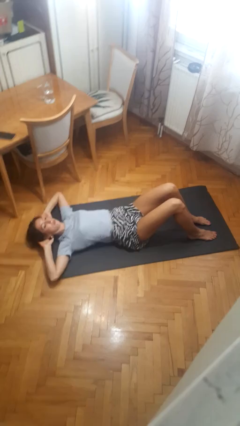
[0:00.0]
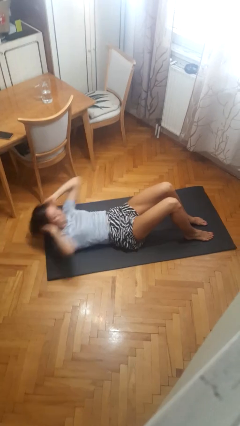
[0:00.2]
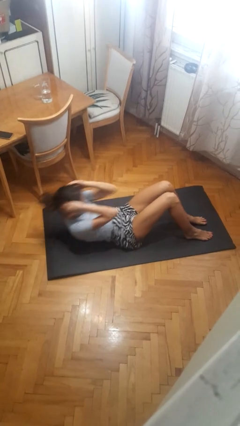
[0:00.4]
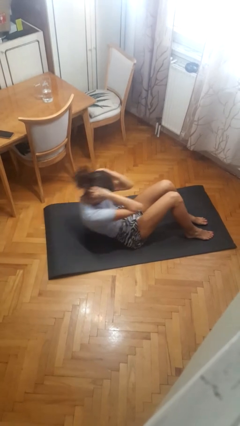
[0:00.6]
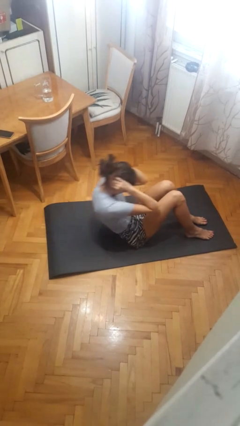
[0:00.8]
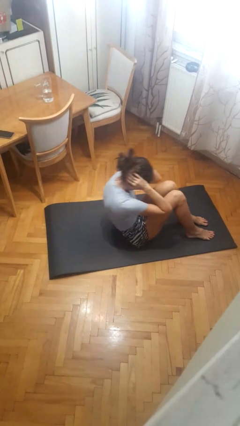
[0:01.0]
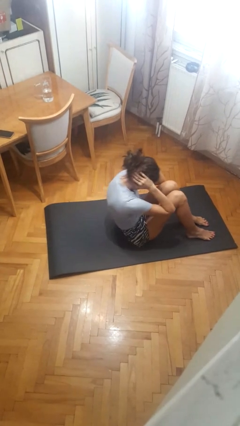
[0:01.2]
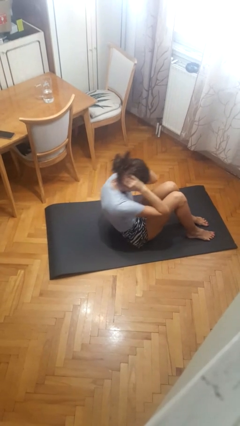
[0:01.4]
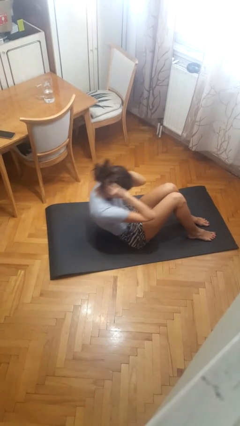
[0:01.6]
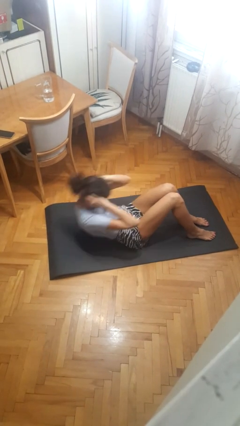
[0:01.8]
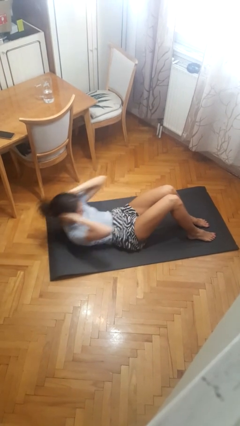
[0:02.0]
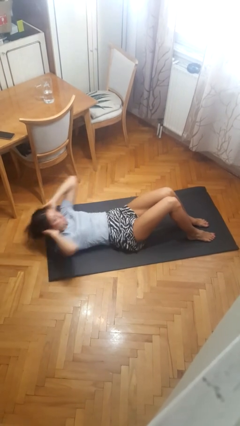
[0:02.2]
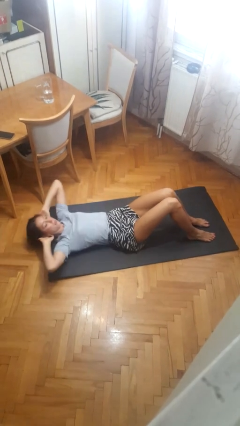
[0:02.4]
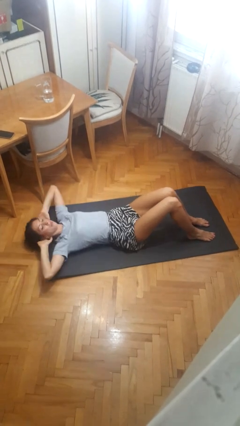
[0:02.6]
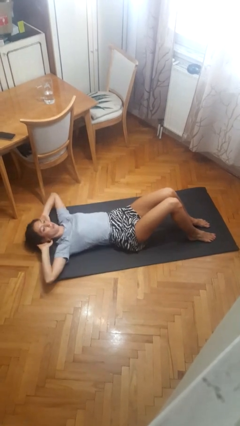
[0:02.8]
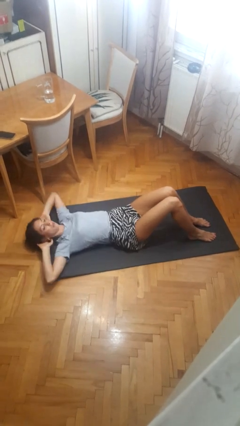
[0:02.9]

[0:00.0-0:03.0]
person exercises with situp

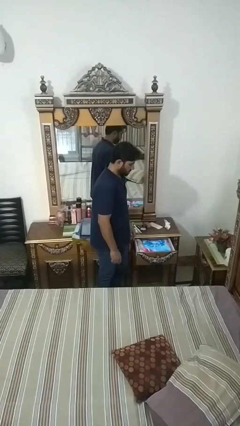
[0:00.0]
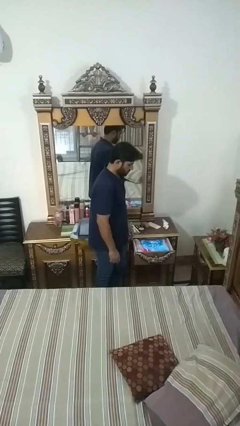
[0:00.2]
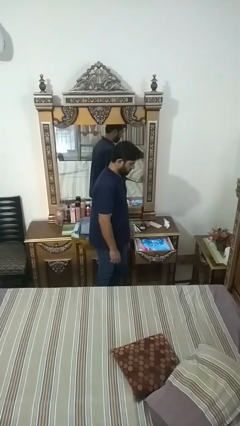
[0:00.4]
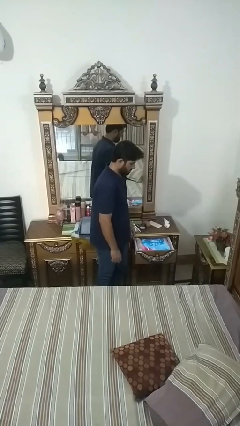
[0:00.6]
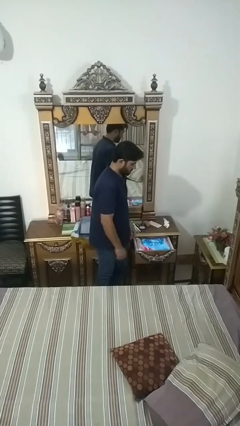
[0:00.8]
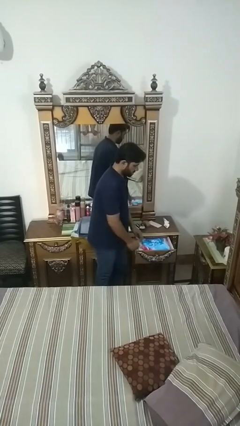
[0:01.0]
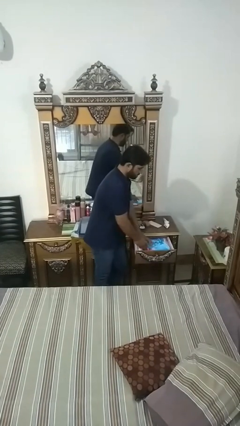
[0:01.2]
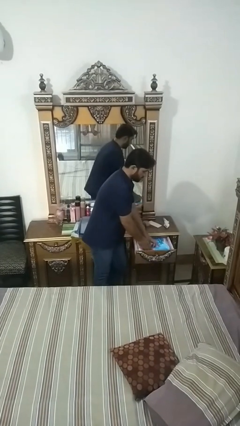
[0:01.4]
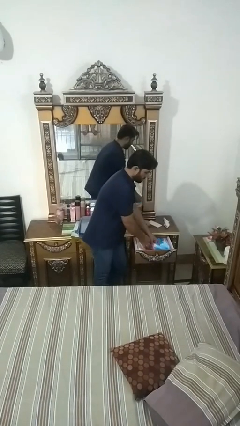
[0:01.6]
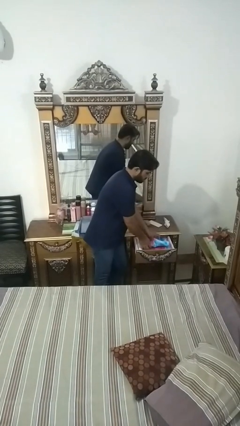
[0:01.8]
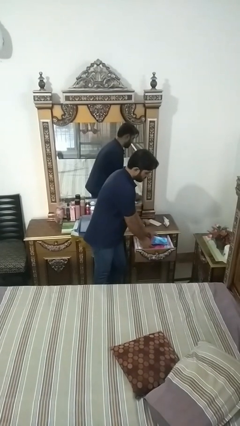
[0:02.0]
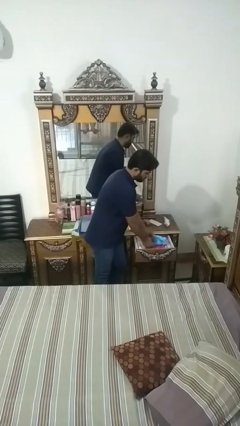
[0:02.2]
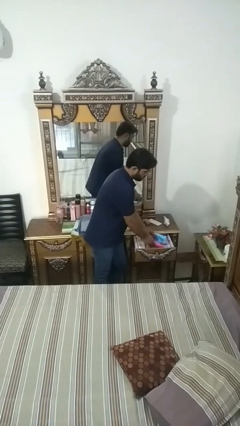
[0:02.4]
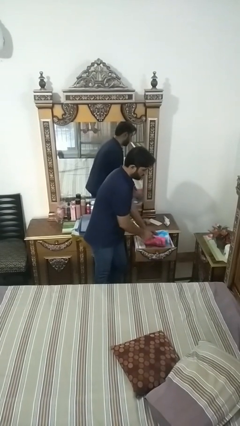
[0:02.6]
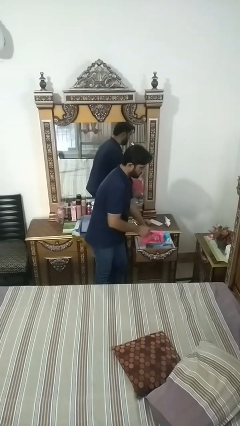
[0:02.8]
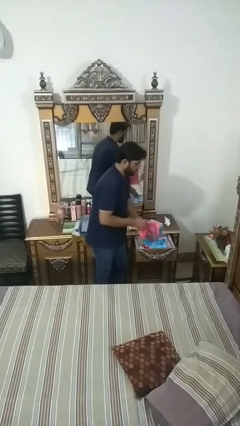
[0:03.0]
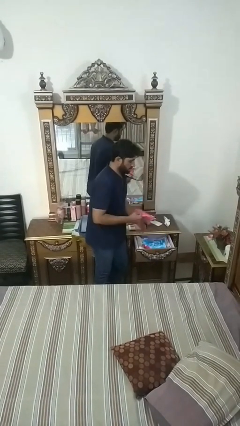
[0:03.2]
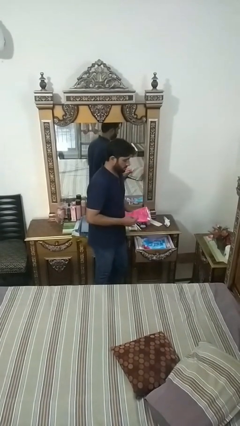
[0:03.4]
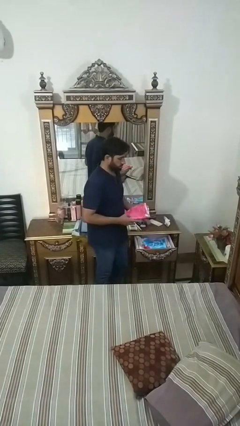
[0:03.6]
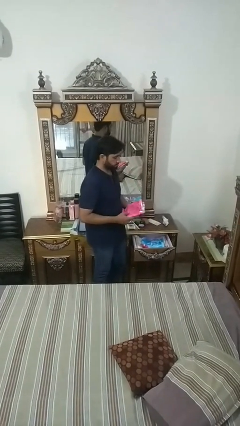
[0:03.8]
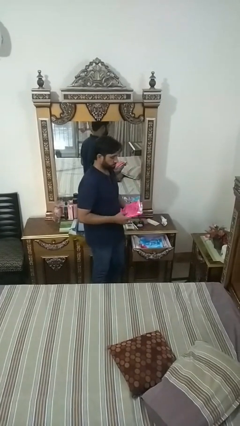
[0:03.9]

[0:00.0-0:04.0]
person takes clothes from dresser

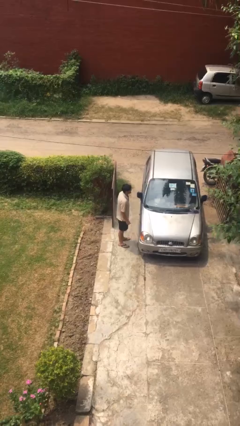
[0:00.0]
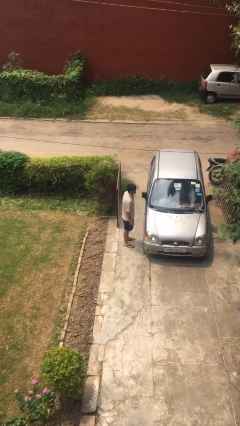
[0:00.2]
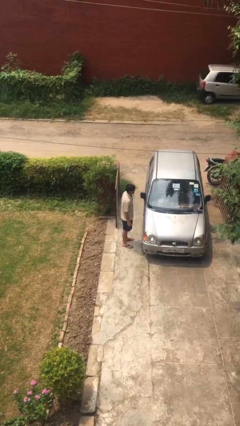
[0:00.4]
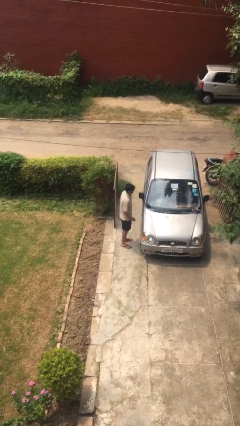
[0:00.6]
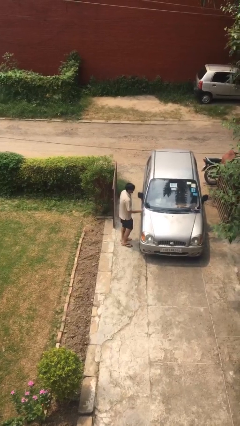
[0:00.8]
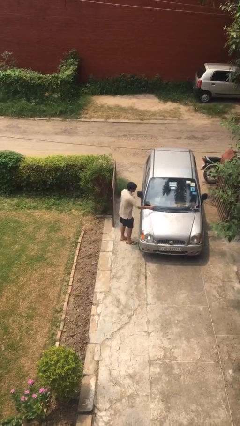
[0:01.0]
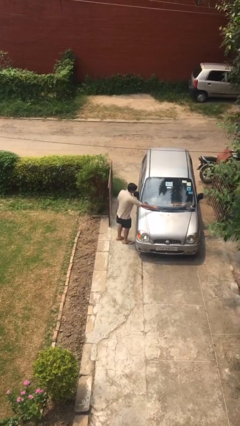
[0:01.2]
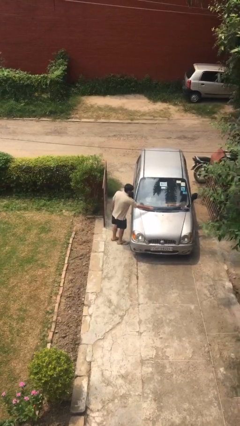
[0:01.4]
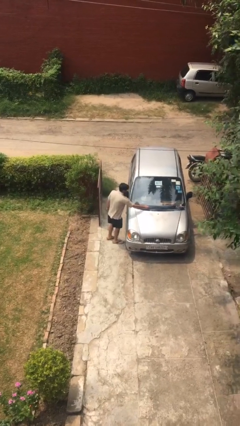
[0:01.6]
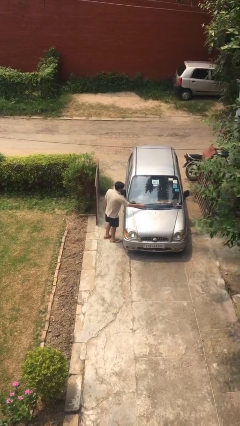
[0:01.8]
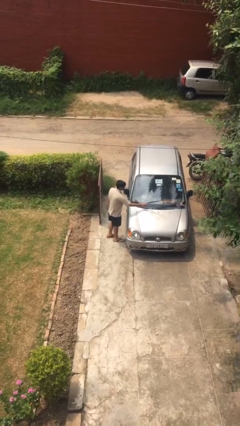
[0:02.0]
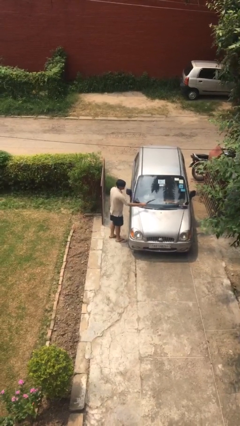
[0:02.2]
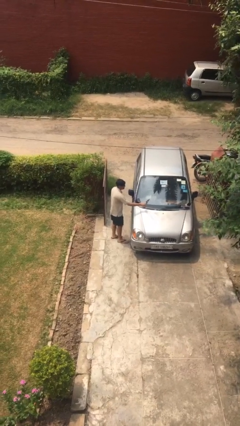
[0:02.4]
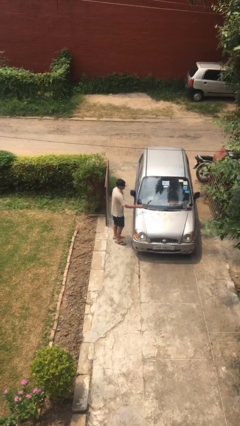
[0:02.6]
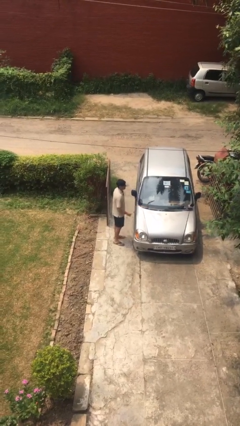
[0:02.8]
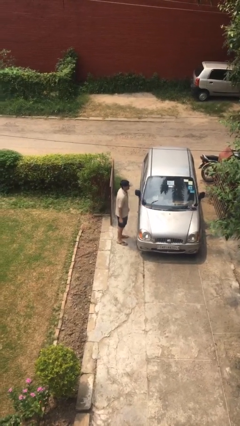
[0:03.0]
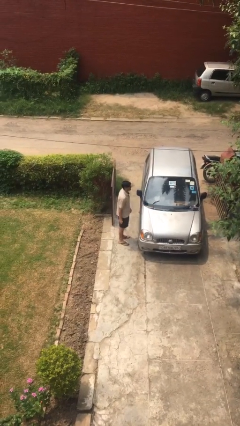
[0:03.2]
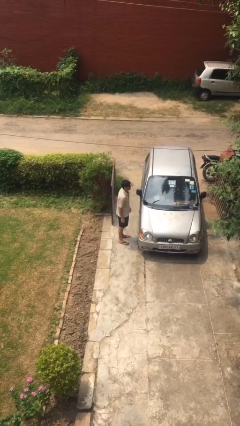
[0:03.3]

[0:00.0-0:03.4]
person flips up car wipers

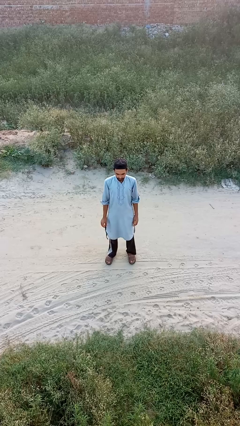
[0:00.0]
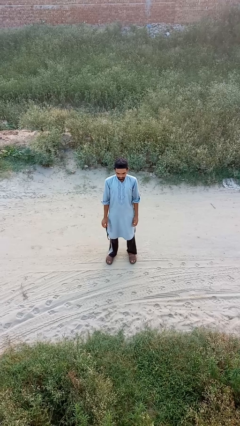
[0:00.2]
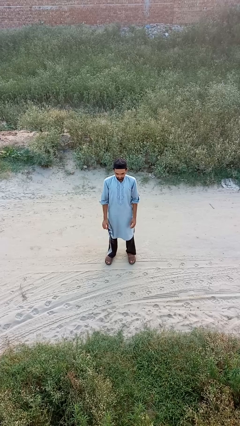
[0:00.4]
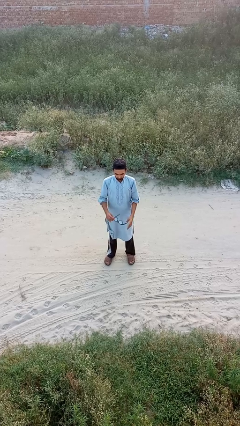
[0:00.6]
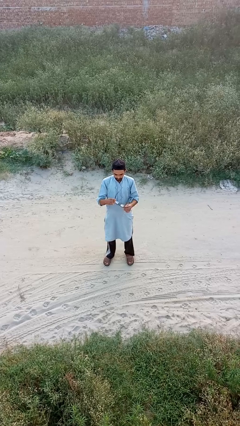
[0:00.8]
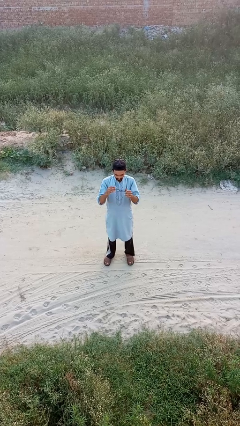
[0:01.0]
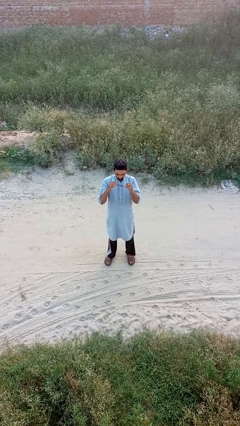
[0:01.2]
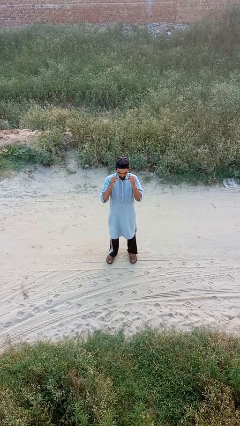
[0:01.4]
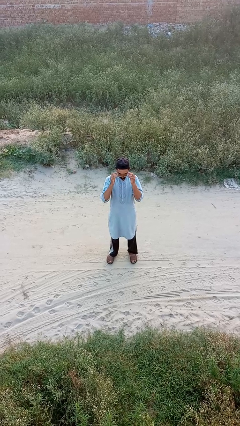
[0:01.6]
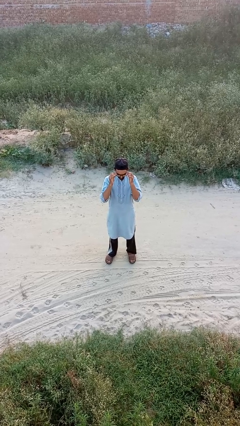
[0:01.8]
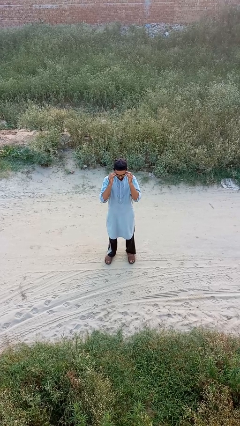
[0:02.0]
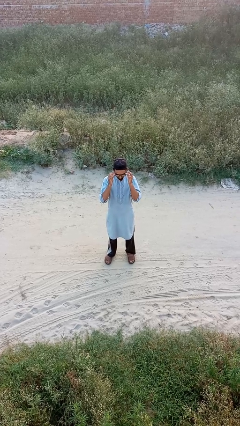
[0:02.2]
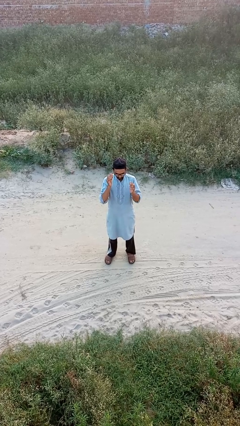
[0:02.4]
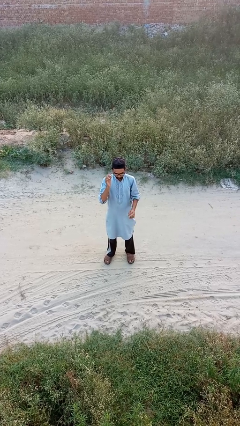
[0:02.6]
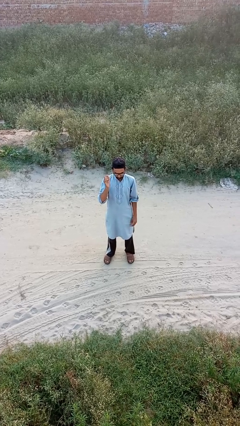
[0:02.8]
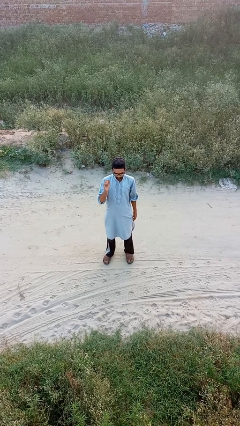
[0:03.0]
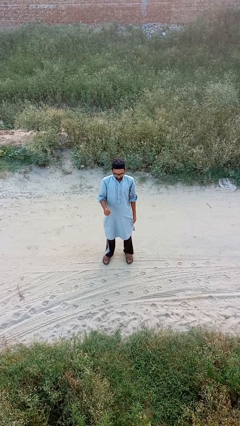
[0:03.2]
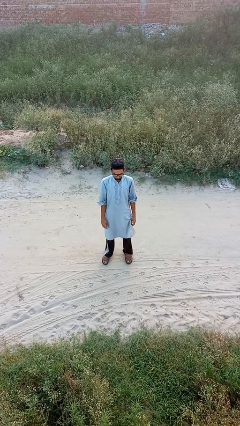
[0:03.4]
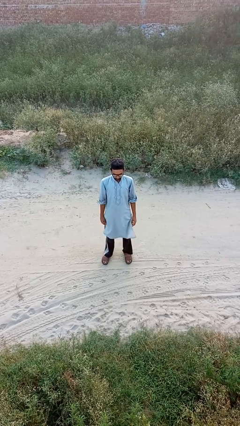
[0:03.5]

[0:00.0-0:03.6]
person puts on glasses

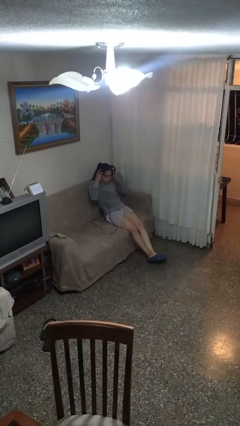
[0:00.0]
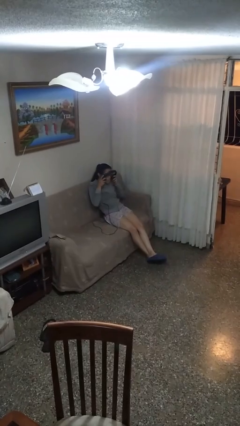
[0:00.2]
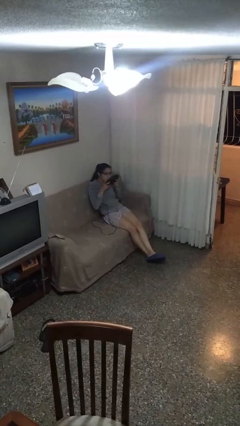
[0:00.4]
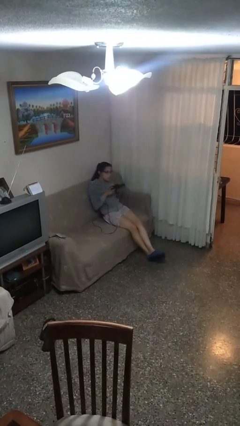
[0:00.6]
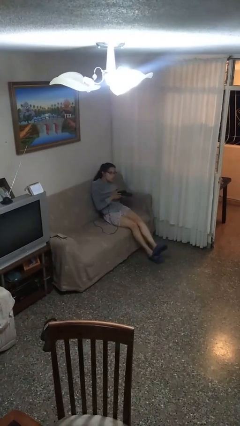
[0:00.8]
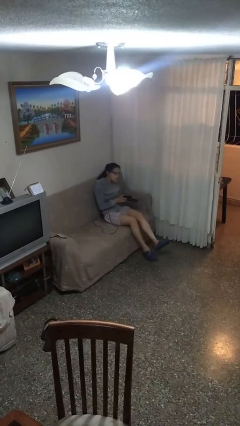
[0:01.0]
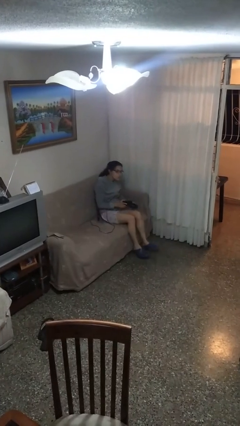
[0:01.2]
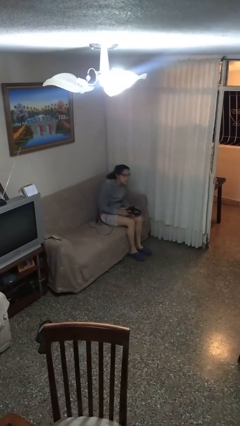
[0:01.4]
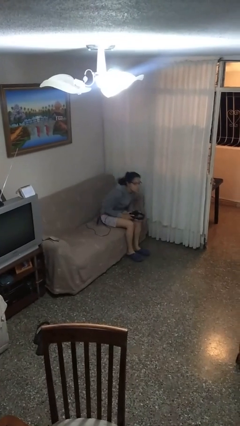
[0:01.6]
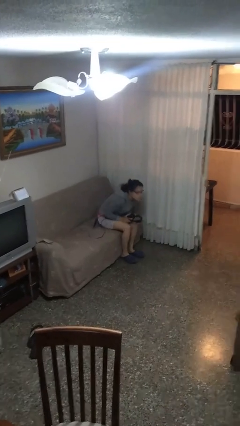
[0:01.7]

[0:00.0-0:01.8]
person takes off headphones

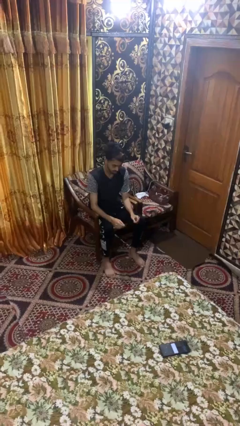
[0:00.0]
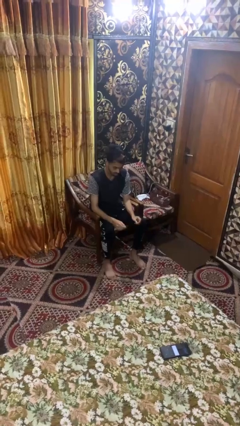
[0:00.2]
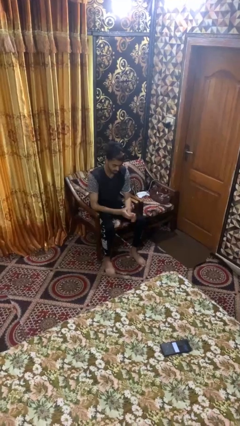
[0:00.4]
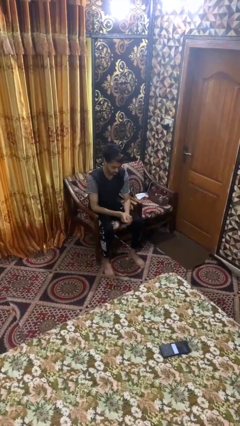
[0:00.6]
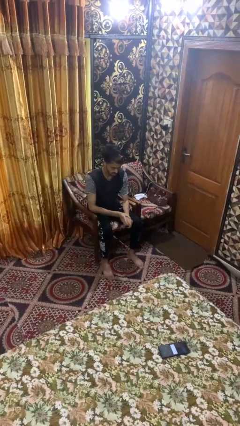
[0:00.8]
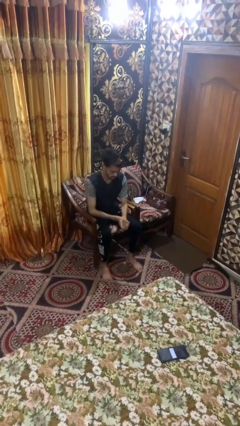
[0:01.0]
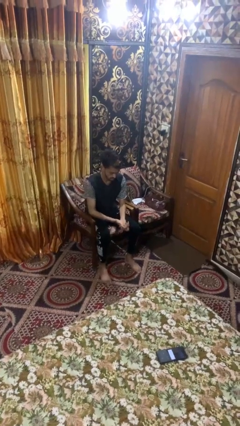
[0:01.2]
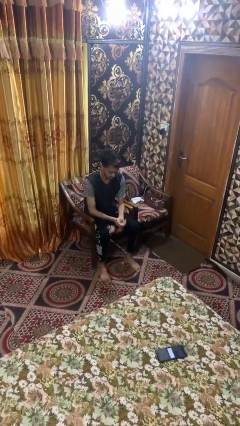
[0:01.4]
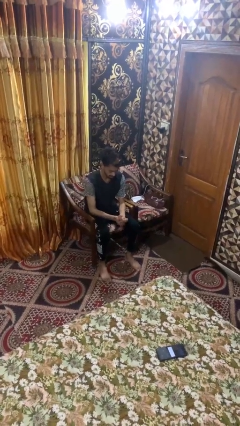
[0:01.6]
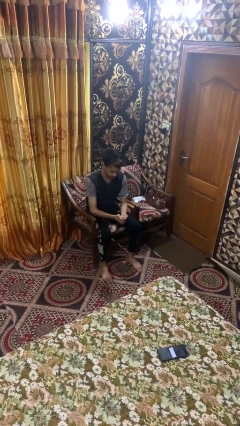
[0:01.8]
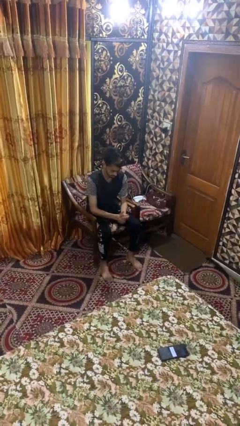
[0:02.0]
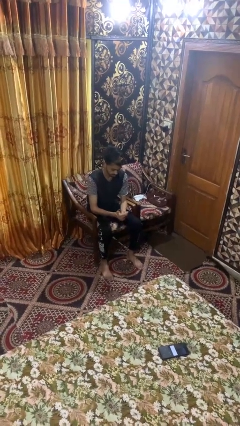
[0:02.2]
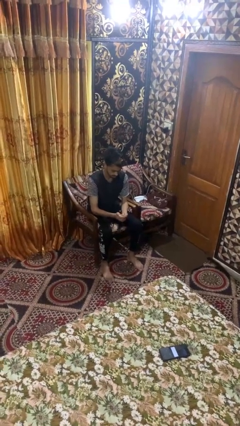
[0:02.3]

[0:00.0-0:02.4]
person looks at hands in lap
